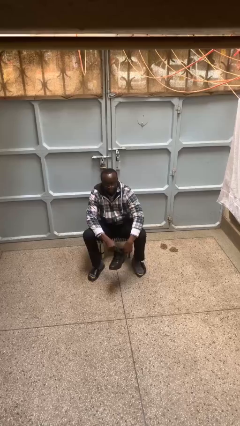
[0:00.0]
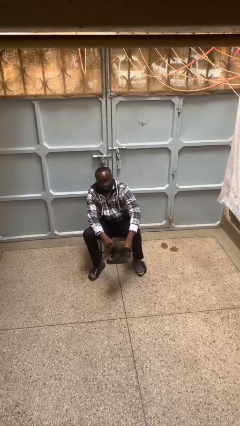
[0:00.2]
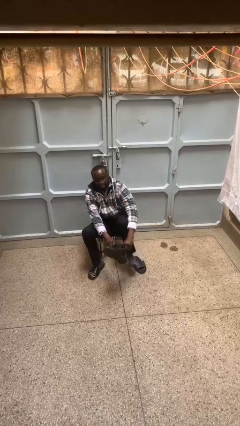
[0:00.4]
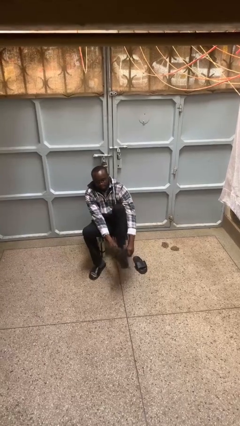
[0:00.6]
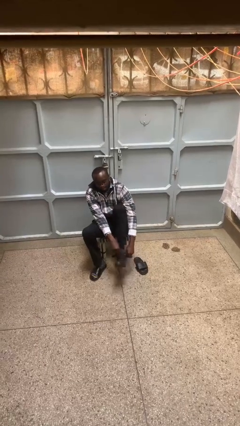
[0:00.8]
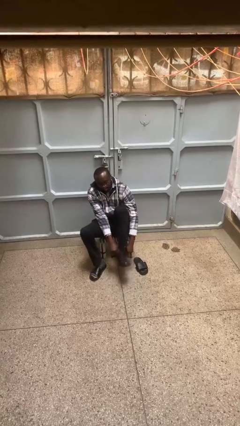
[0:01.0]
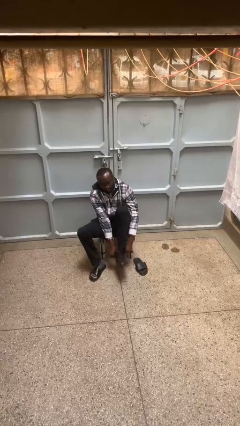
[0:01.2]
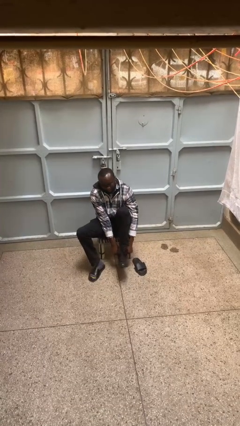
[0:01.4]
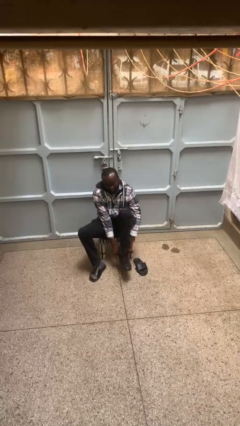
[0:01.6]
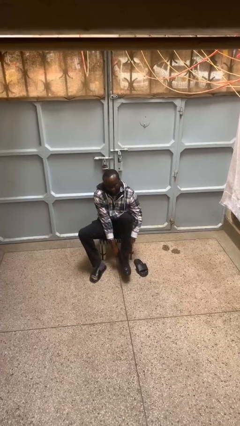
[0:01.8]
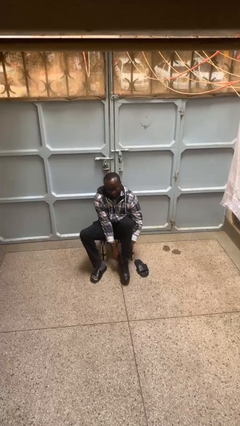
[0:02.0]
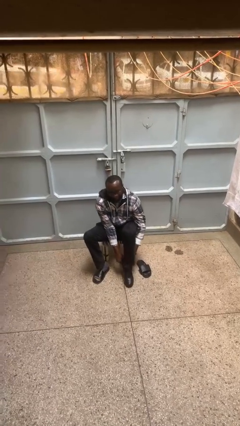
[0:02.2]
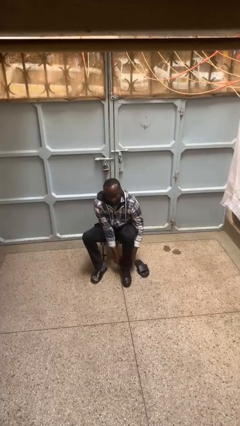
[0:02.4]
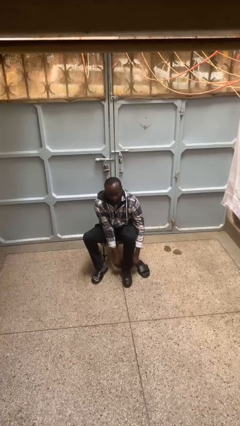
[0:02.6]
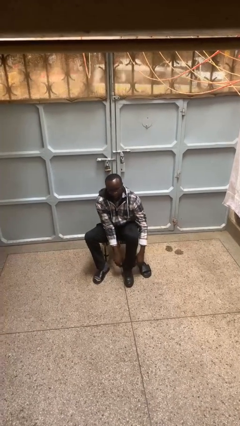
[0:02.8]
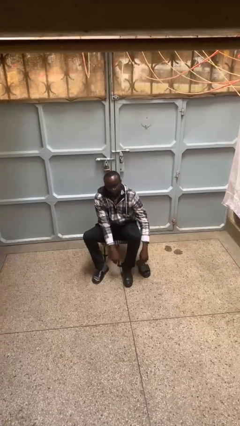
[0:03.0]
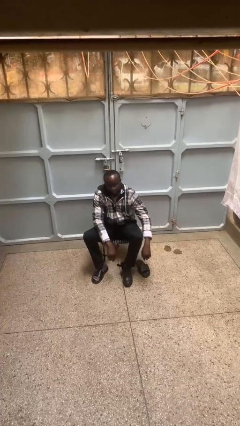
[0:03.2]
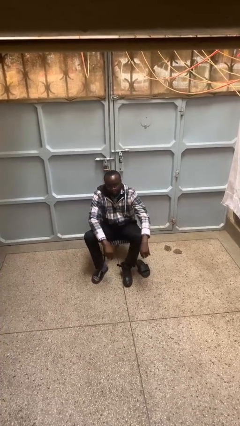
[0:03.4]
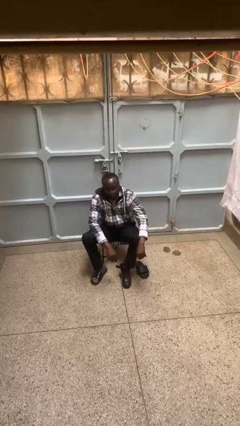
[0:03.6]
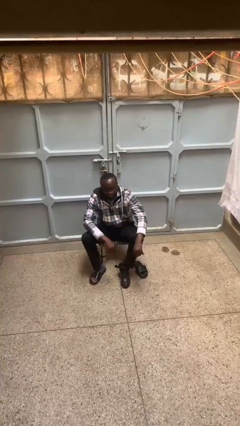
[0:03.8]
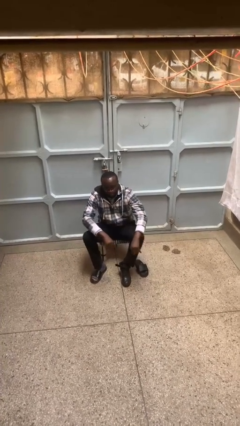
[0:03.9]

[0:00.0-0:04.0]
person puts on boots

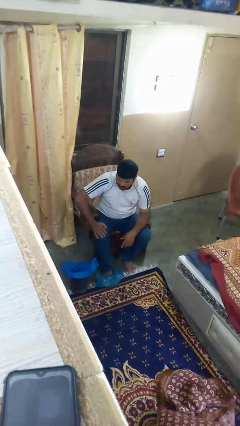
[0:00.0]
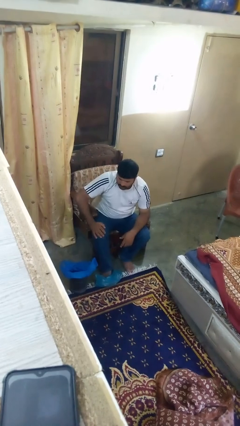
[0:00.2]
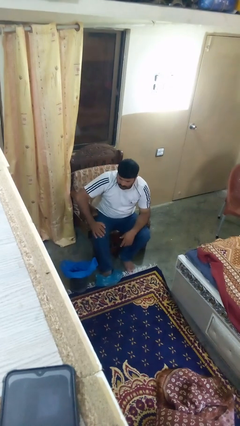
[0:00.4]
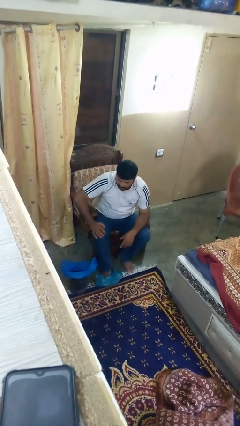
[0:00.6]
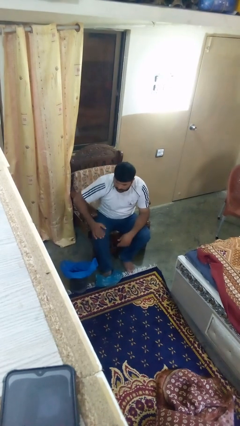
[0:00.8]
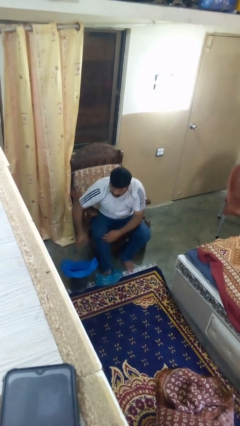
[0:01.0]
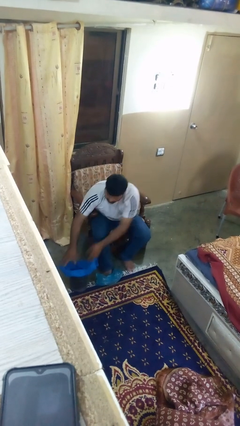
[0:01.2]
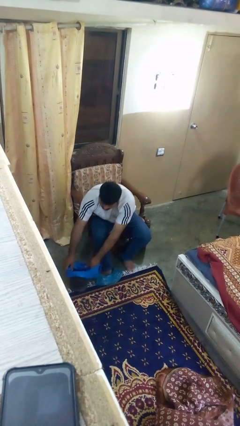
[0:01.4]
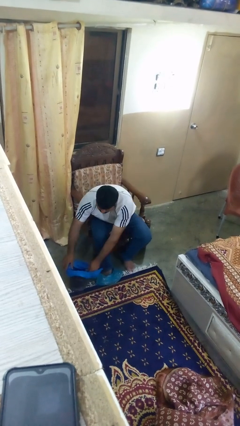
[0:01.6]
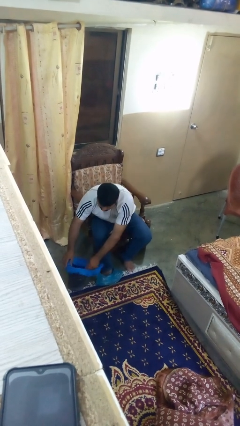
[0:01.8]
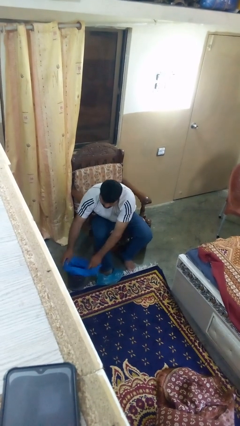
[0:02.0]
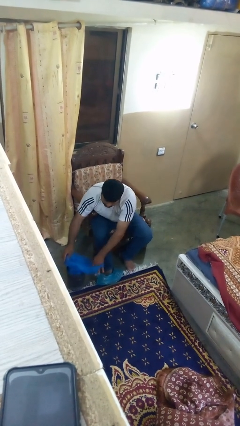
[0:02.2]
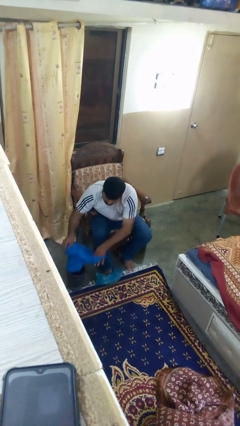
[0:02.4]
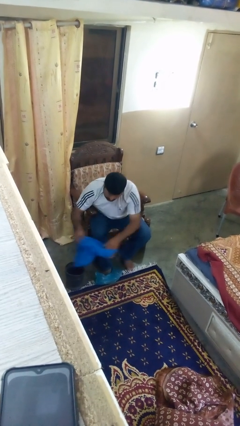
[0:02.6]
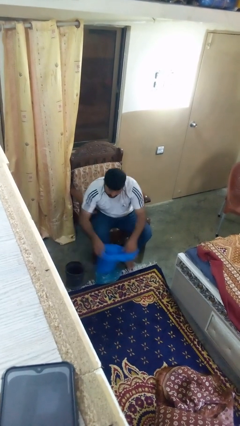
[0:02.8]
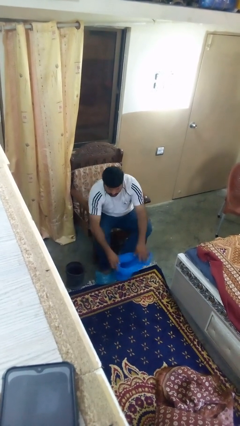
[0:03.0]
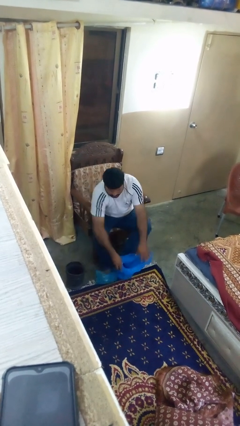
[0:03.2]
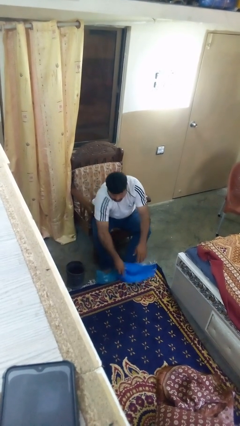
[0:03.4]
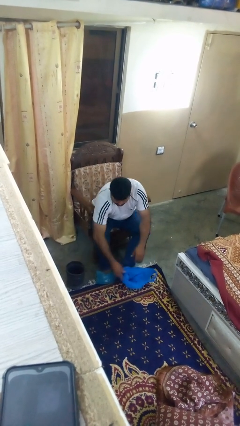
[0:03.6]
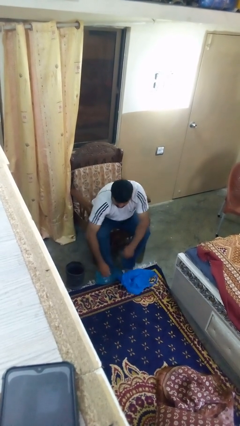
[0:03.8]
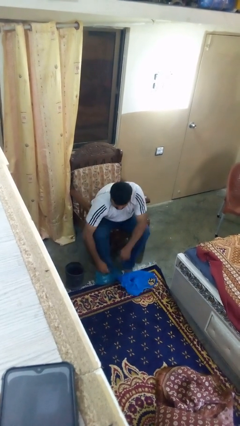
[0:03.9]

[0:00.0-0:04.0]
person removes trashbag from trashcan

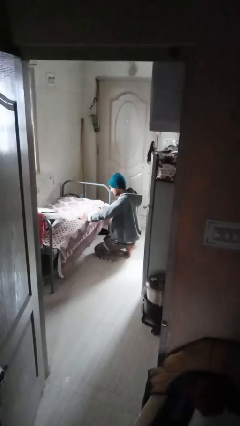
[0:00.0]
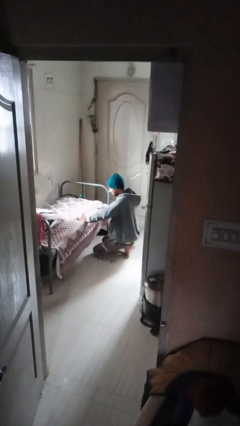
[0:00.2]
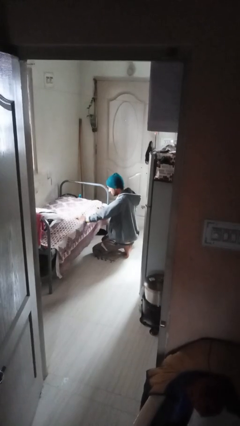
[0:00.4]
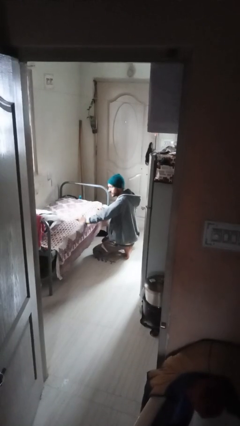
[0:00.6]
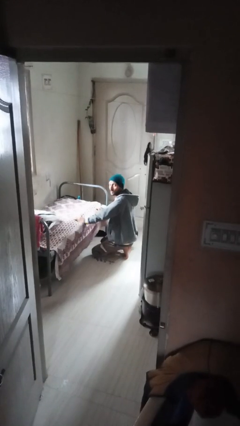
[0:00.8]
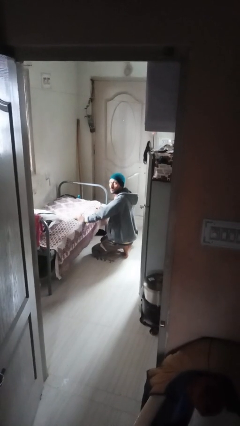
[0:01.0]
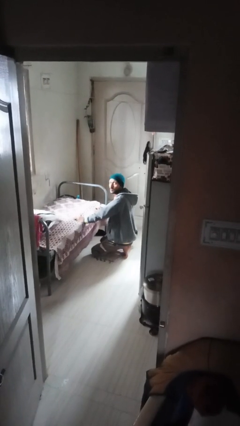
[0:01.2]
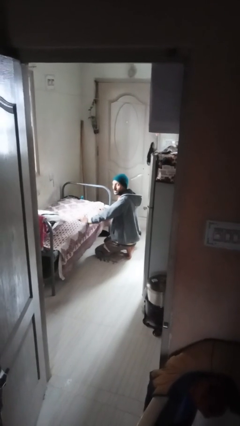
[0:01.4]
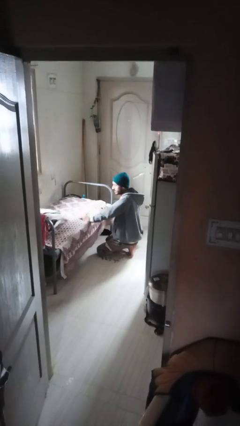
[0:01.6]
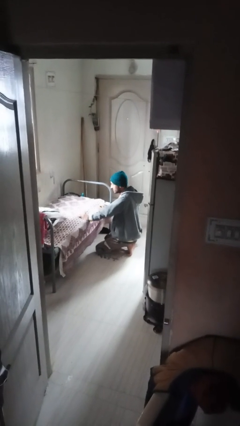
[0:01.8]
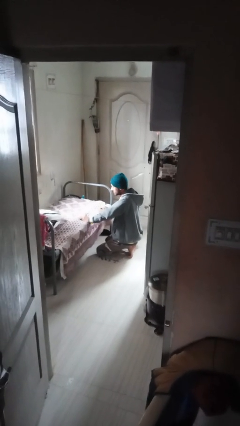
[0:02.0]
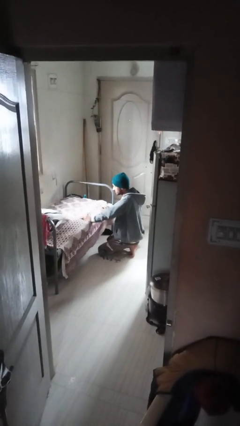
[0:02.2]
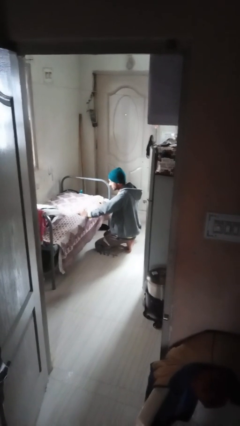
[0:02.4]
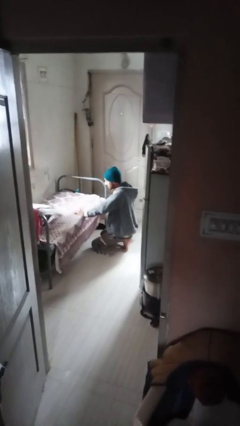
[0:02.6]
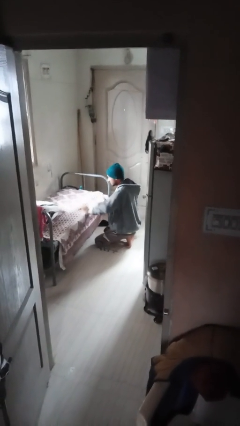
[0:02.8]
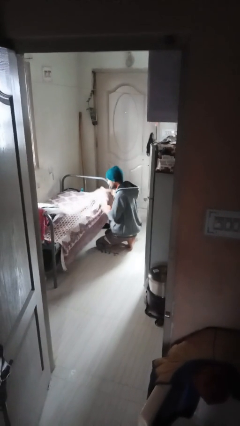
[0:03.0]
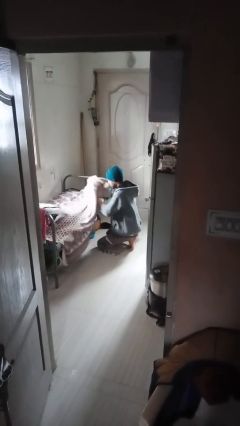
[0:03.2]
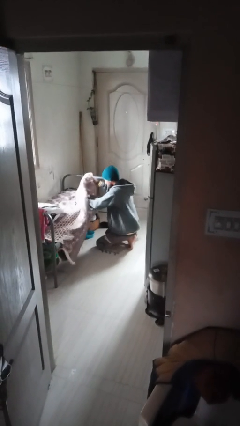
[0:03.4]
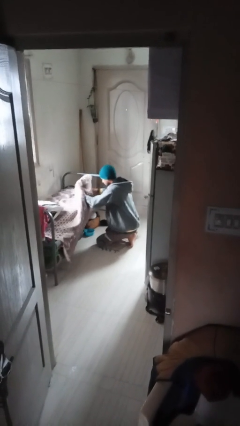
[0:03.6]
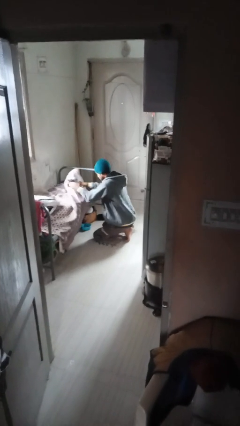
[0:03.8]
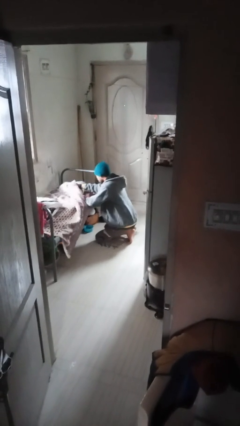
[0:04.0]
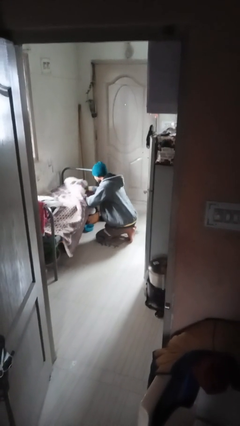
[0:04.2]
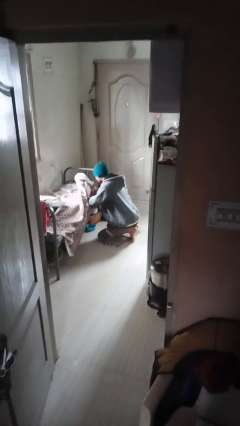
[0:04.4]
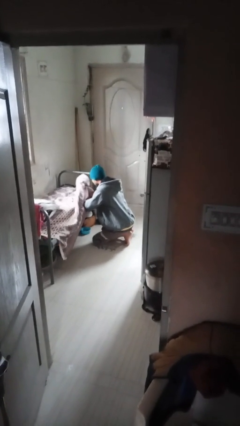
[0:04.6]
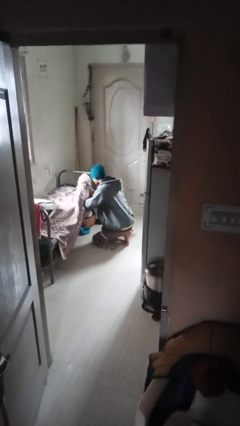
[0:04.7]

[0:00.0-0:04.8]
person searches under couch

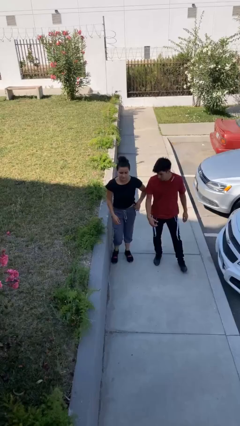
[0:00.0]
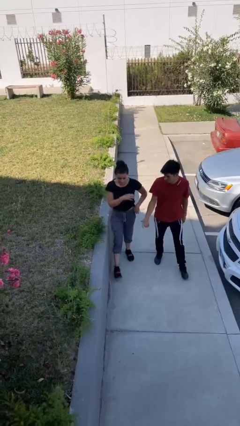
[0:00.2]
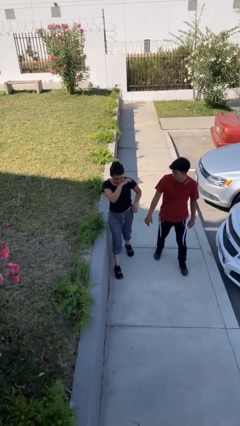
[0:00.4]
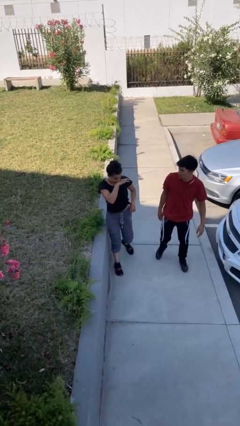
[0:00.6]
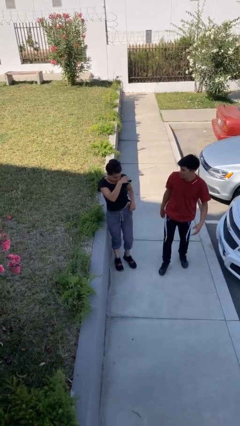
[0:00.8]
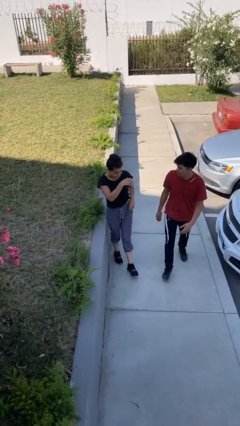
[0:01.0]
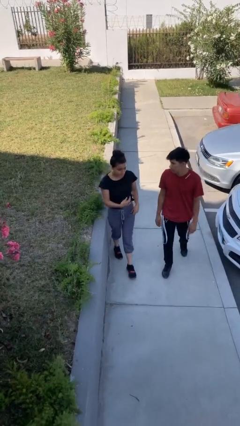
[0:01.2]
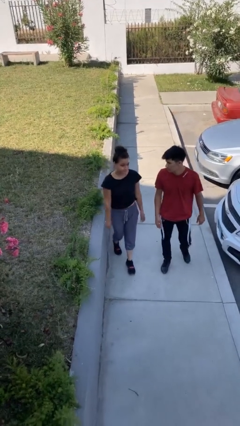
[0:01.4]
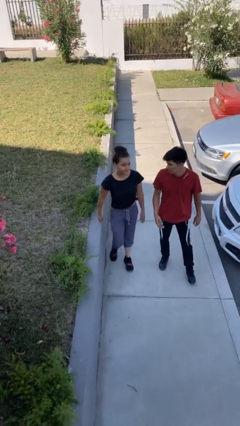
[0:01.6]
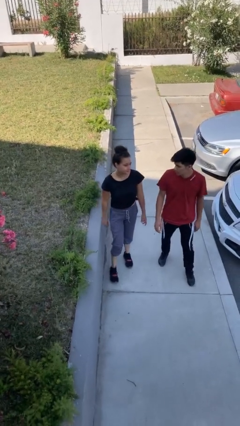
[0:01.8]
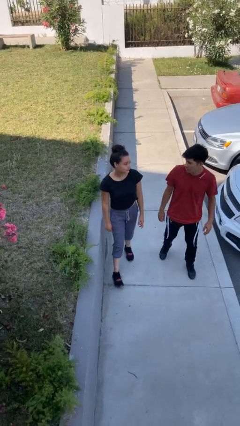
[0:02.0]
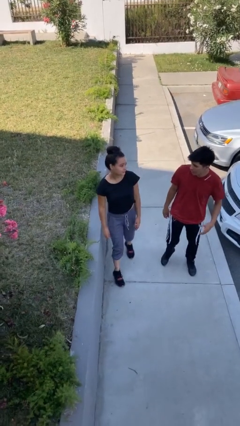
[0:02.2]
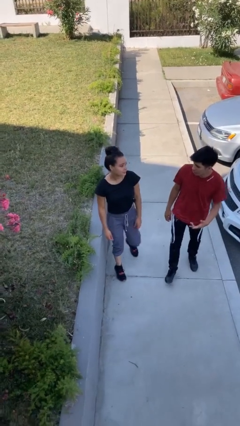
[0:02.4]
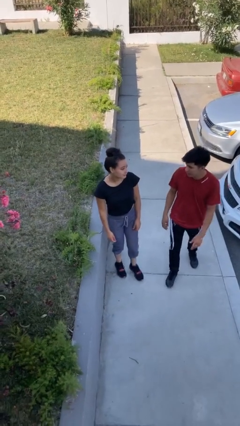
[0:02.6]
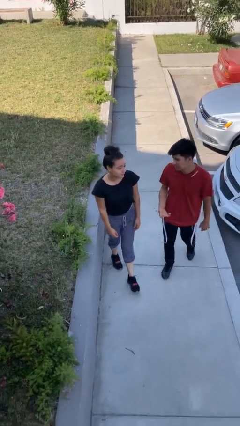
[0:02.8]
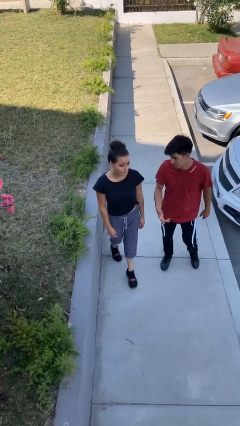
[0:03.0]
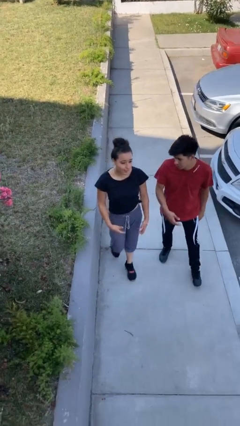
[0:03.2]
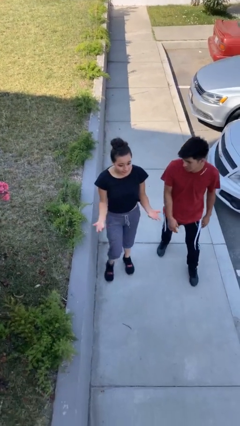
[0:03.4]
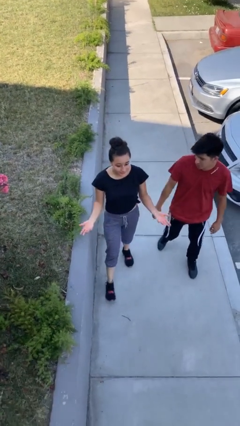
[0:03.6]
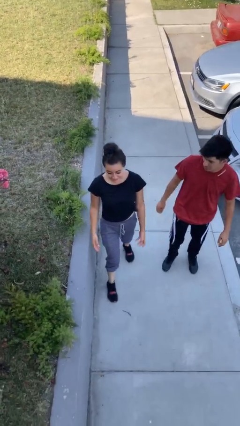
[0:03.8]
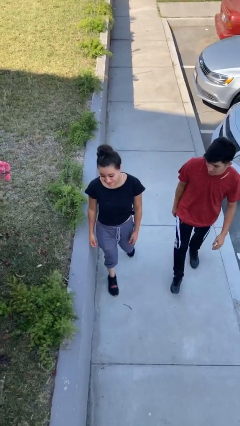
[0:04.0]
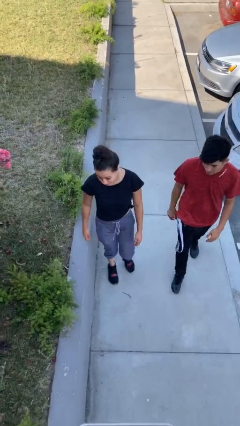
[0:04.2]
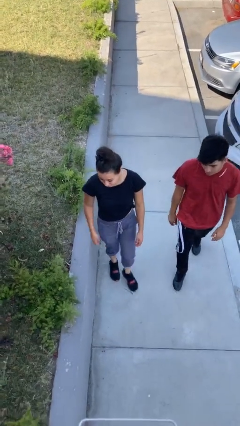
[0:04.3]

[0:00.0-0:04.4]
person talks to person

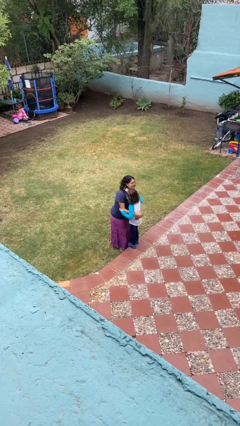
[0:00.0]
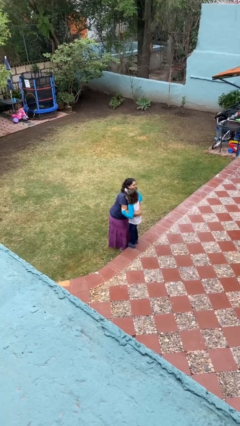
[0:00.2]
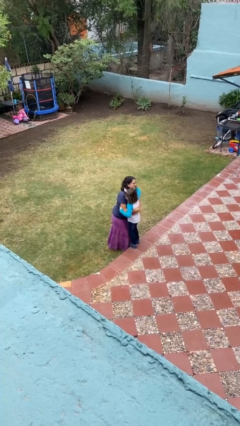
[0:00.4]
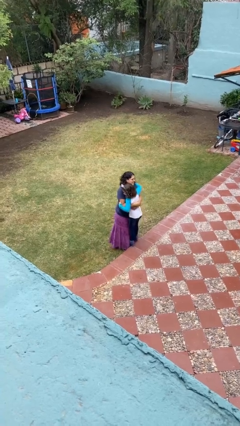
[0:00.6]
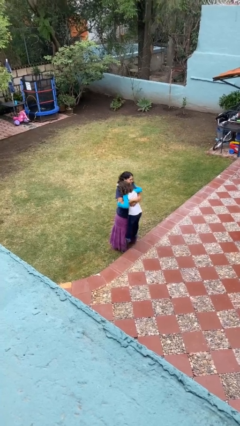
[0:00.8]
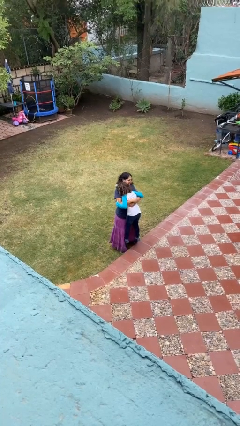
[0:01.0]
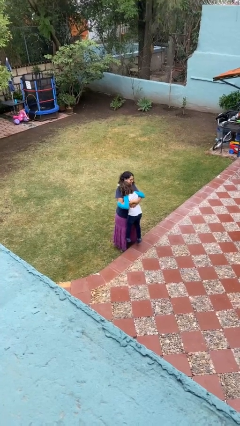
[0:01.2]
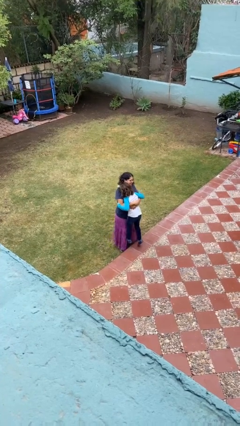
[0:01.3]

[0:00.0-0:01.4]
person picks up person
